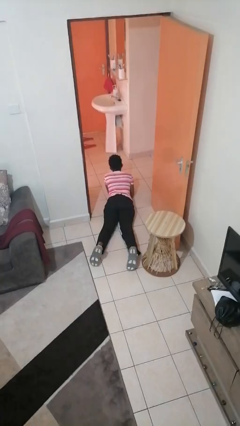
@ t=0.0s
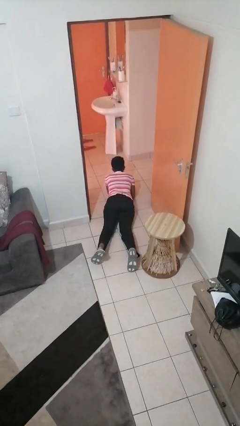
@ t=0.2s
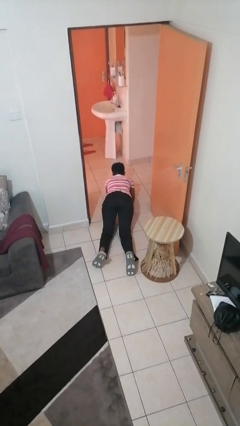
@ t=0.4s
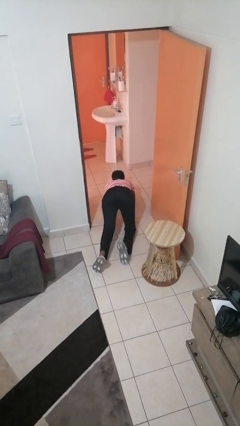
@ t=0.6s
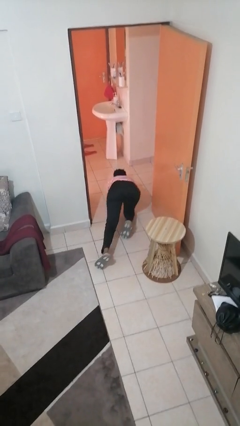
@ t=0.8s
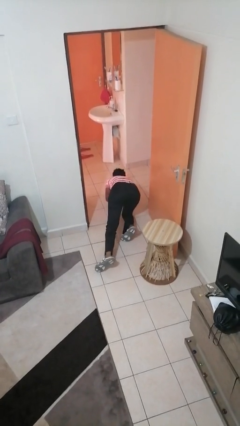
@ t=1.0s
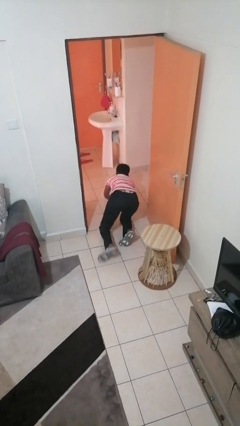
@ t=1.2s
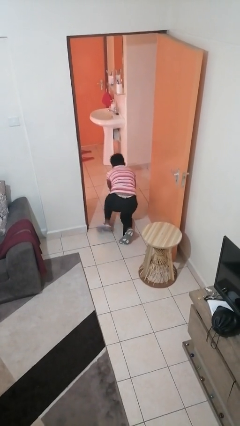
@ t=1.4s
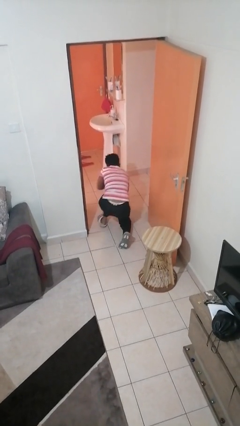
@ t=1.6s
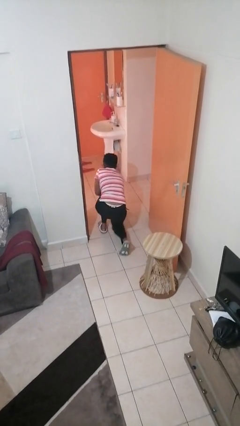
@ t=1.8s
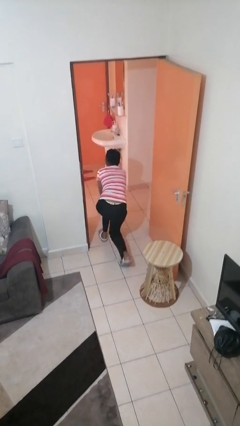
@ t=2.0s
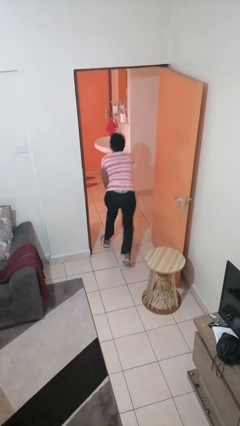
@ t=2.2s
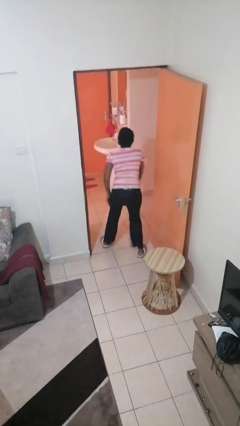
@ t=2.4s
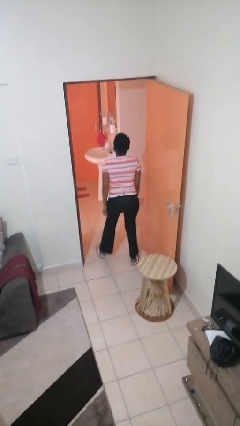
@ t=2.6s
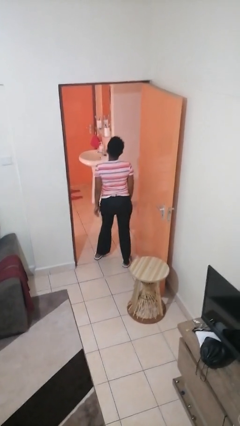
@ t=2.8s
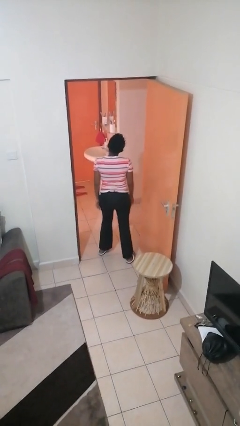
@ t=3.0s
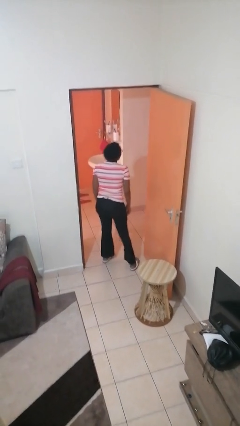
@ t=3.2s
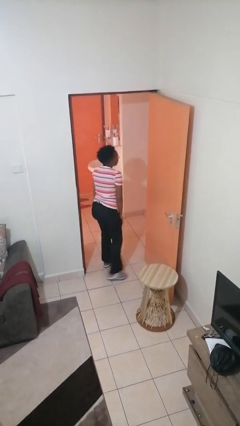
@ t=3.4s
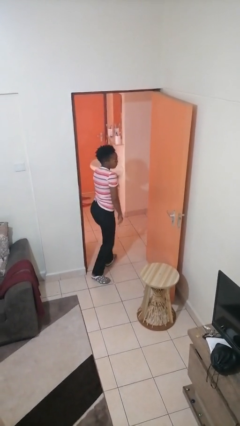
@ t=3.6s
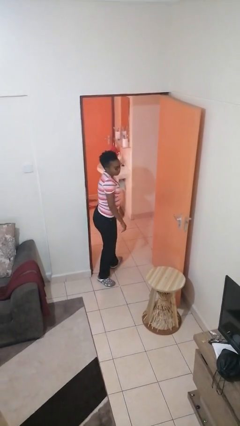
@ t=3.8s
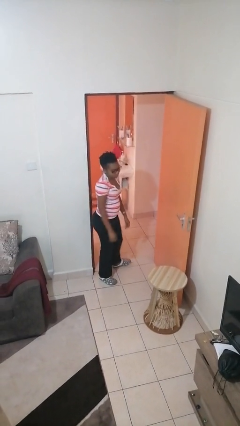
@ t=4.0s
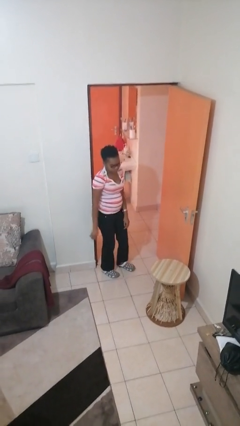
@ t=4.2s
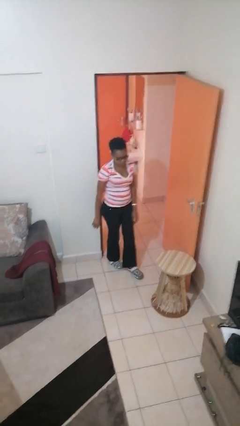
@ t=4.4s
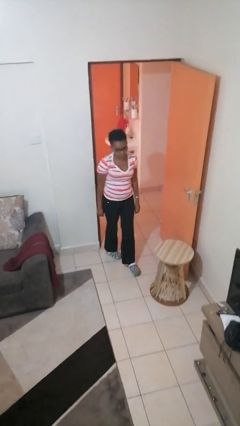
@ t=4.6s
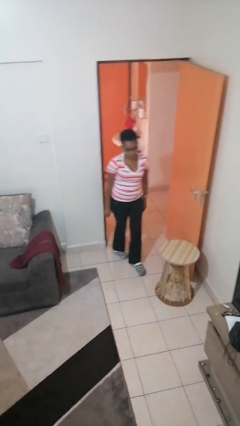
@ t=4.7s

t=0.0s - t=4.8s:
person stands up from floor

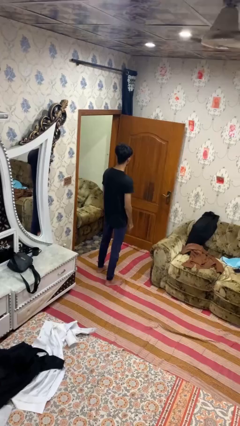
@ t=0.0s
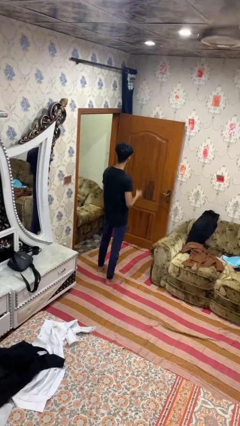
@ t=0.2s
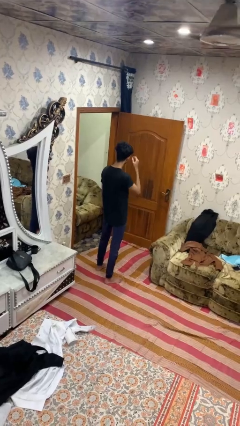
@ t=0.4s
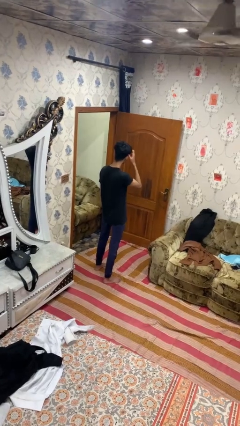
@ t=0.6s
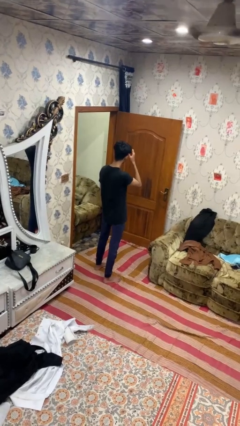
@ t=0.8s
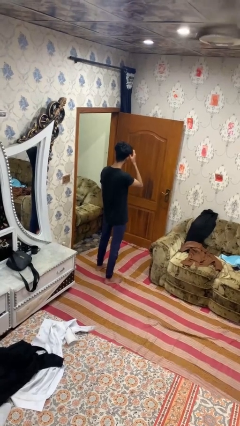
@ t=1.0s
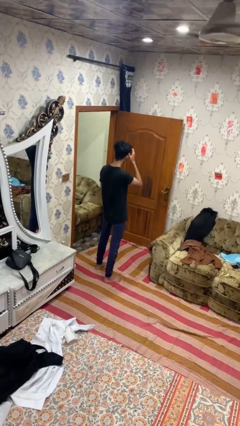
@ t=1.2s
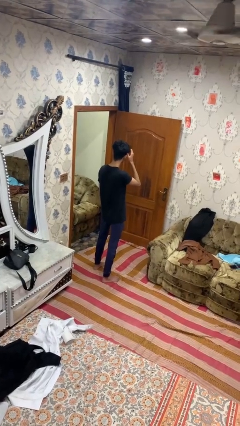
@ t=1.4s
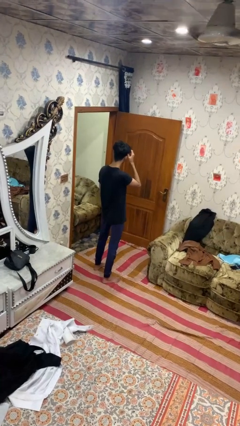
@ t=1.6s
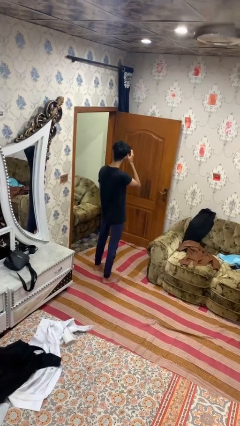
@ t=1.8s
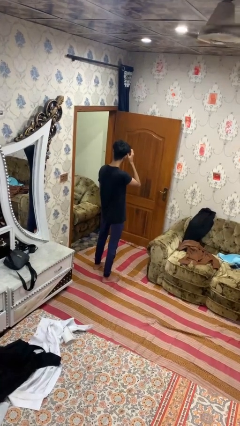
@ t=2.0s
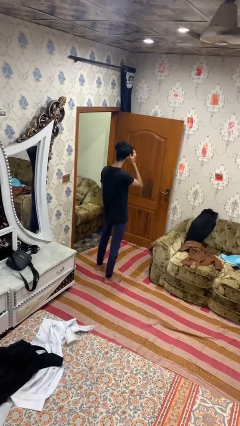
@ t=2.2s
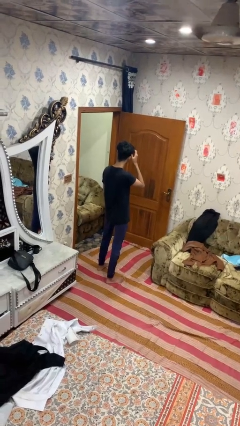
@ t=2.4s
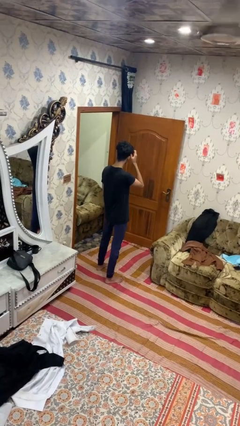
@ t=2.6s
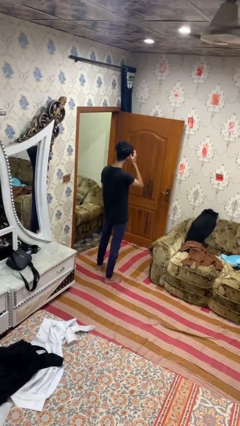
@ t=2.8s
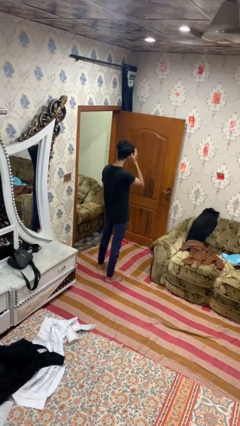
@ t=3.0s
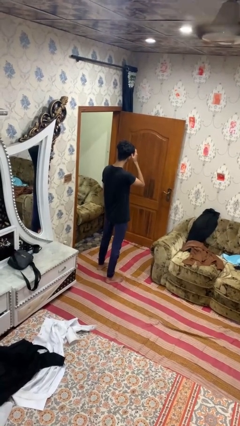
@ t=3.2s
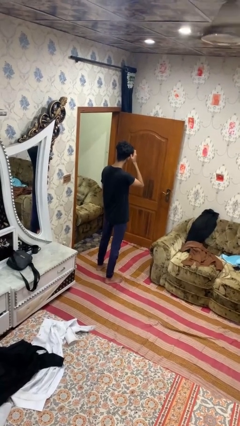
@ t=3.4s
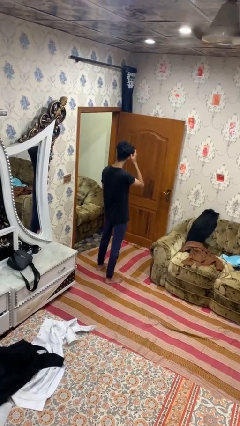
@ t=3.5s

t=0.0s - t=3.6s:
person strokes hair

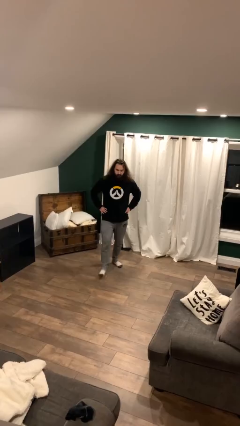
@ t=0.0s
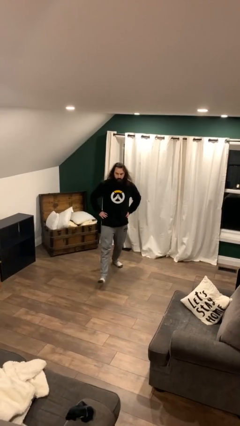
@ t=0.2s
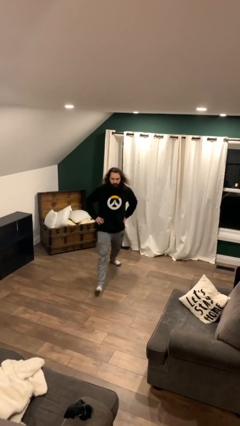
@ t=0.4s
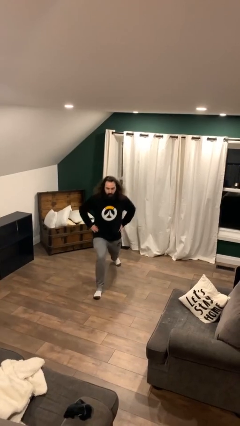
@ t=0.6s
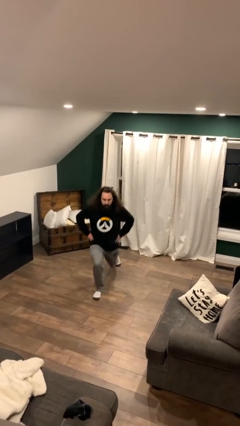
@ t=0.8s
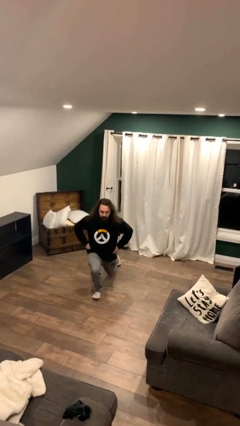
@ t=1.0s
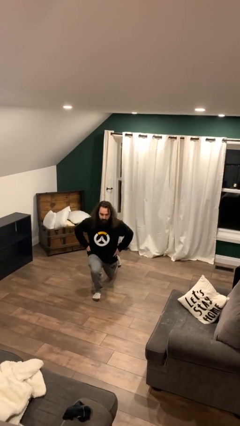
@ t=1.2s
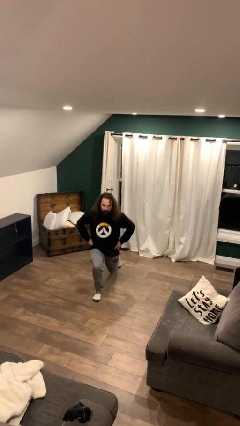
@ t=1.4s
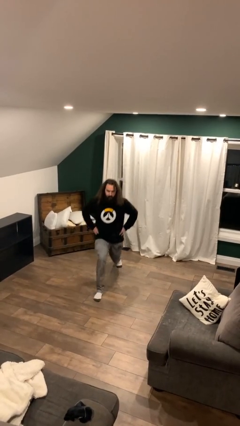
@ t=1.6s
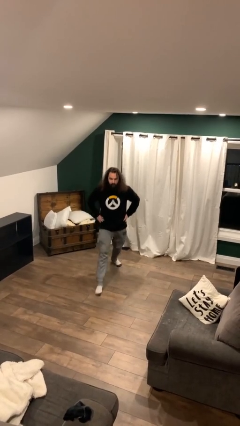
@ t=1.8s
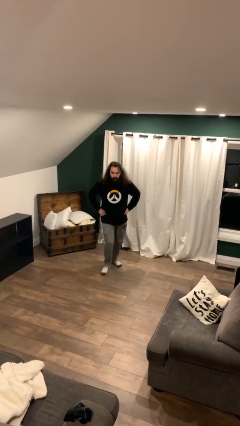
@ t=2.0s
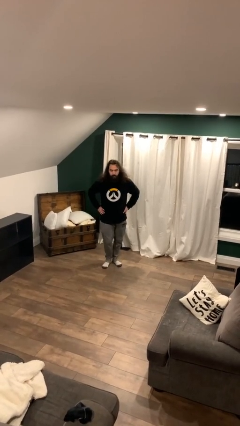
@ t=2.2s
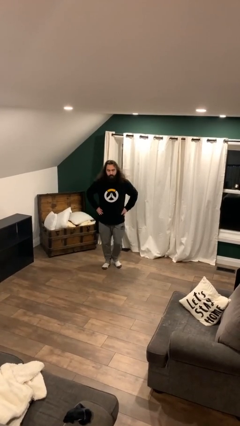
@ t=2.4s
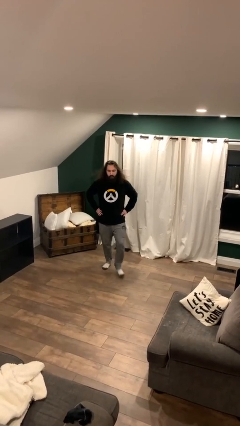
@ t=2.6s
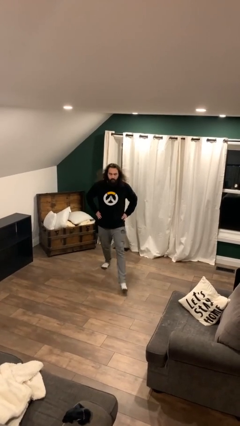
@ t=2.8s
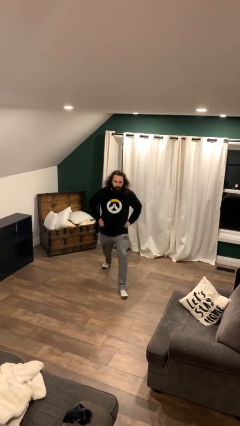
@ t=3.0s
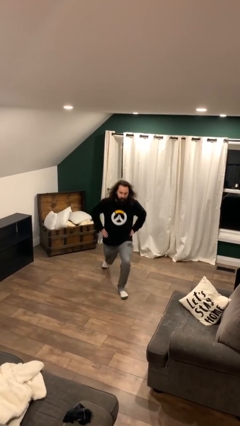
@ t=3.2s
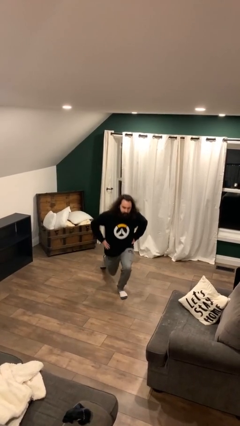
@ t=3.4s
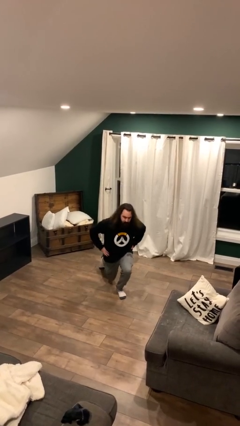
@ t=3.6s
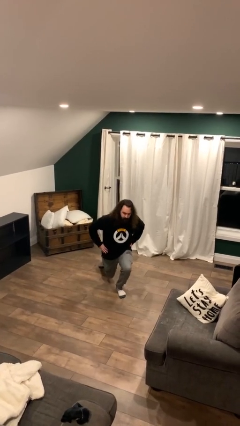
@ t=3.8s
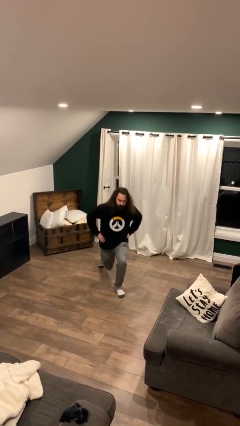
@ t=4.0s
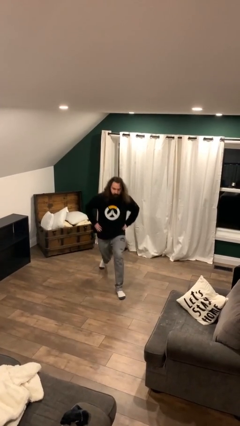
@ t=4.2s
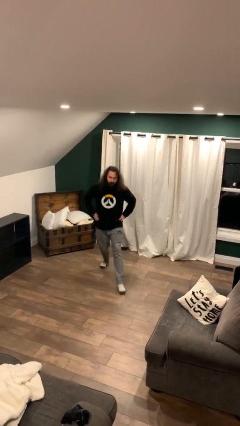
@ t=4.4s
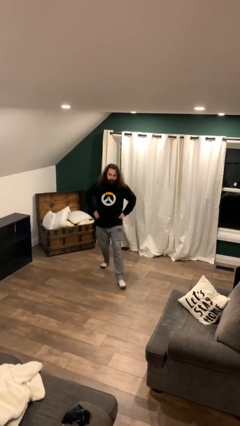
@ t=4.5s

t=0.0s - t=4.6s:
person exercises with lunges

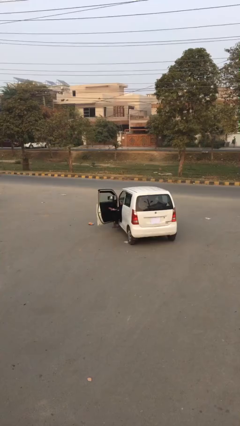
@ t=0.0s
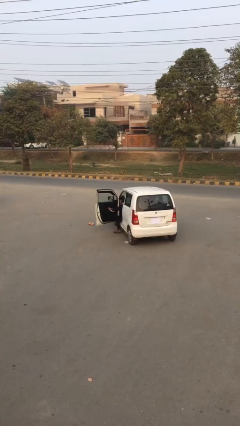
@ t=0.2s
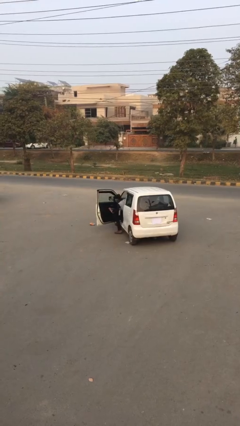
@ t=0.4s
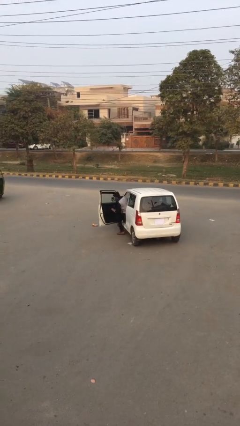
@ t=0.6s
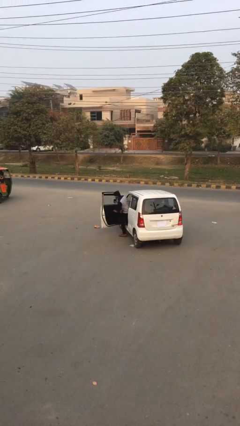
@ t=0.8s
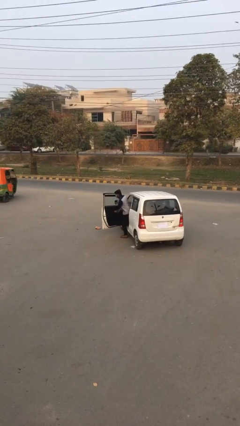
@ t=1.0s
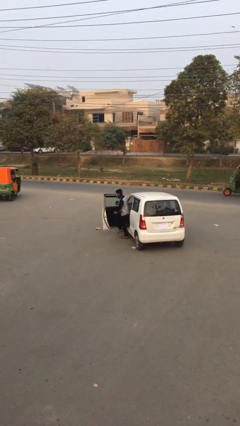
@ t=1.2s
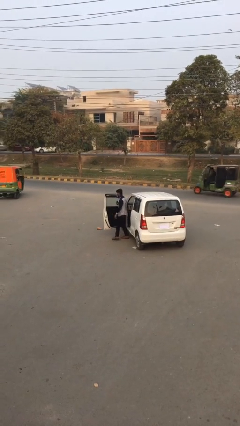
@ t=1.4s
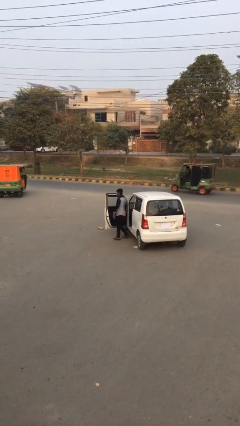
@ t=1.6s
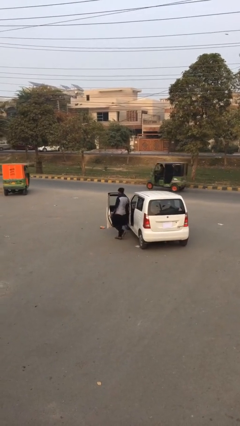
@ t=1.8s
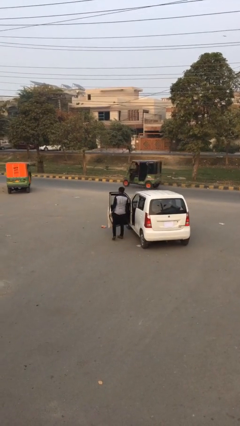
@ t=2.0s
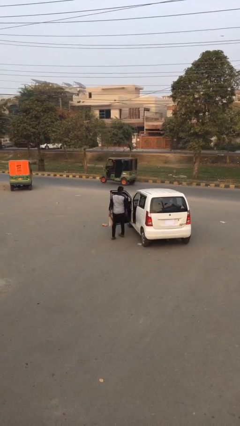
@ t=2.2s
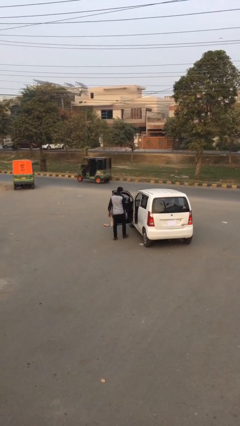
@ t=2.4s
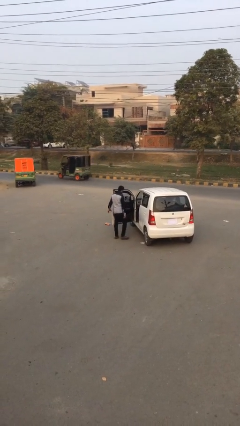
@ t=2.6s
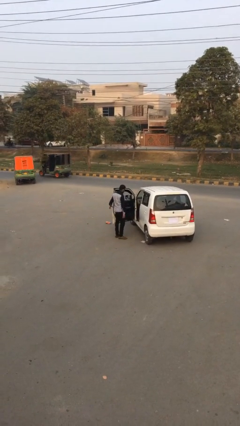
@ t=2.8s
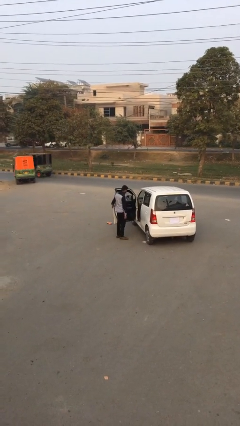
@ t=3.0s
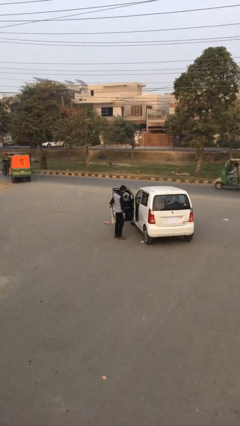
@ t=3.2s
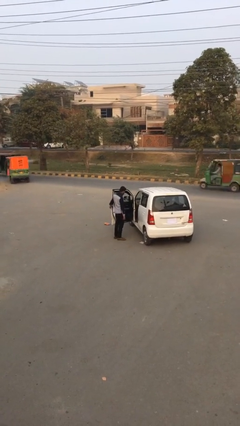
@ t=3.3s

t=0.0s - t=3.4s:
person exits car

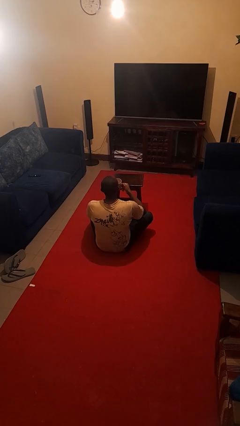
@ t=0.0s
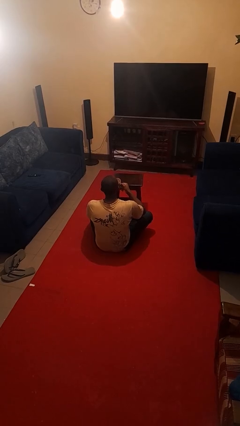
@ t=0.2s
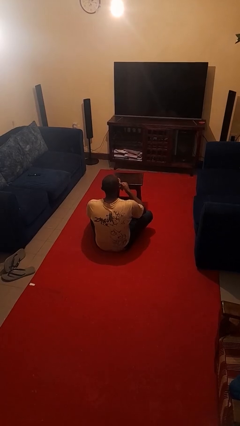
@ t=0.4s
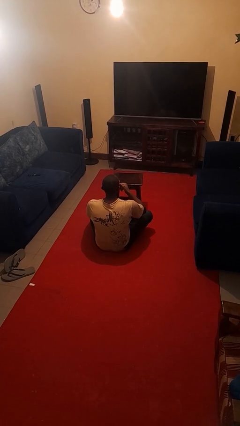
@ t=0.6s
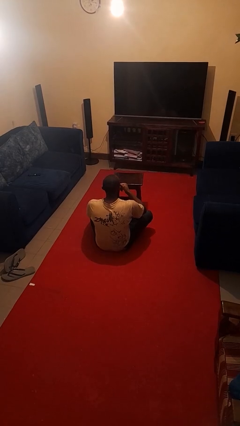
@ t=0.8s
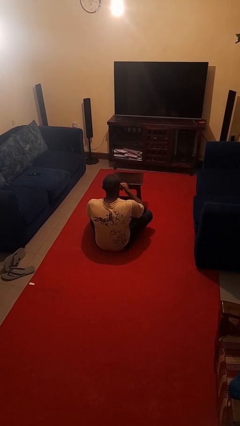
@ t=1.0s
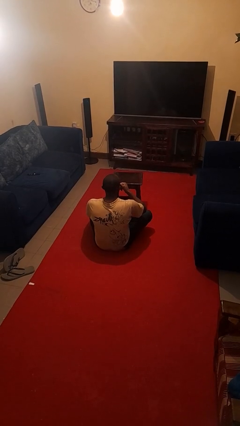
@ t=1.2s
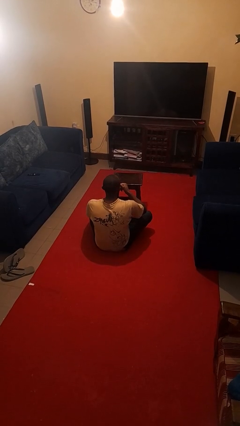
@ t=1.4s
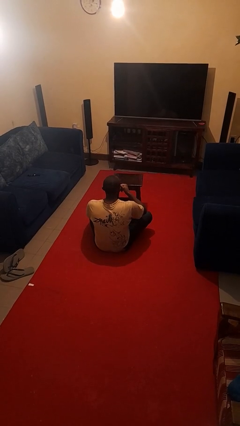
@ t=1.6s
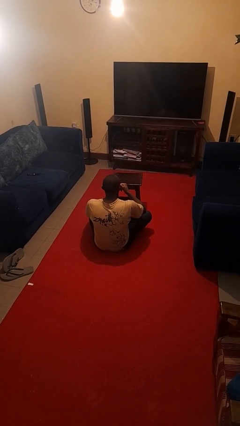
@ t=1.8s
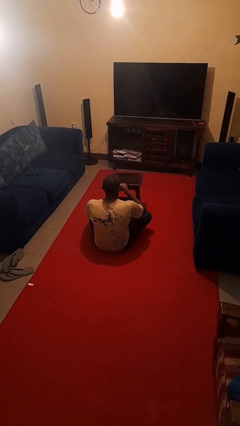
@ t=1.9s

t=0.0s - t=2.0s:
person drinks from mug
